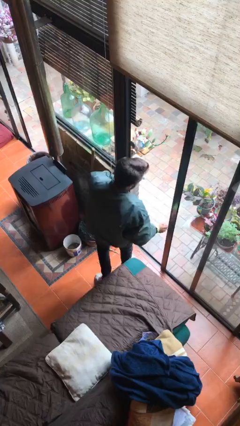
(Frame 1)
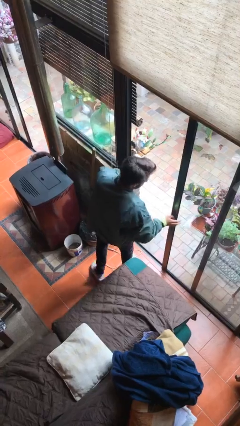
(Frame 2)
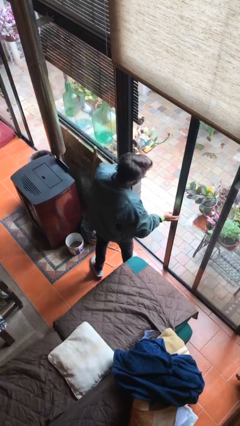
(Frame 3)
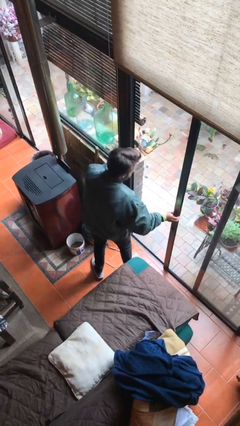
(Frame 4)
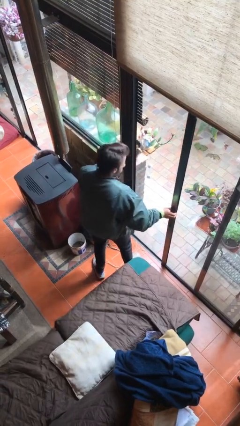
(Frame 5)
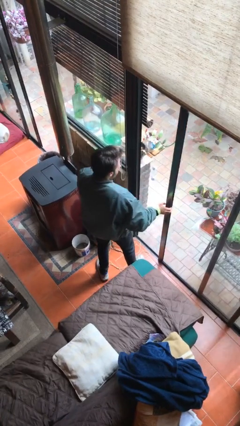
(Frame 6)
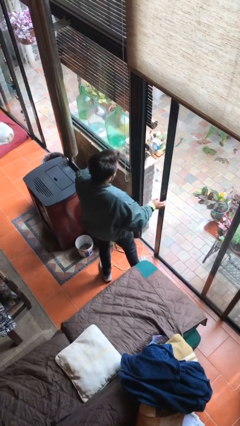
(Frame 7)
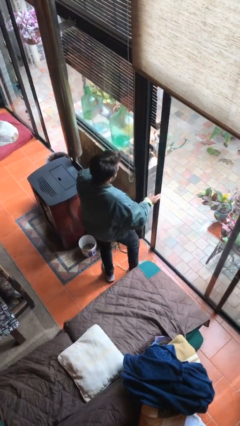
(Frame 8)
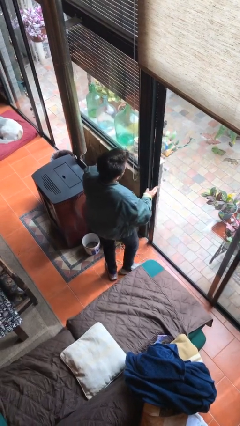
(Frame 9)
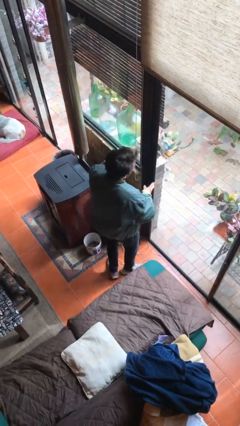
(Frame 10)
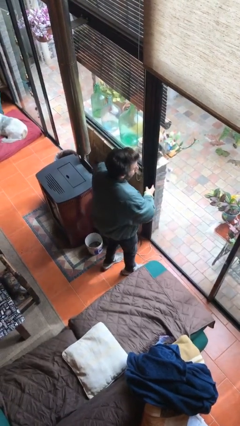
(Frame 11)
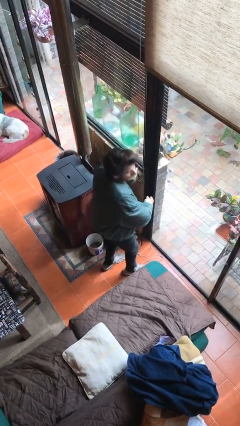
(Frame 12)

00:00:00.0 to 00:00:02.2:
person closes facility door

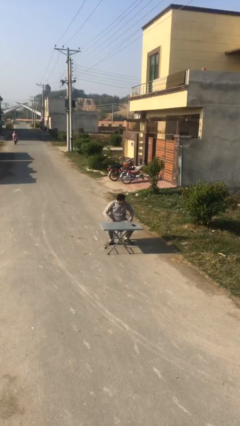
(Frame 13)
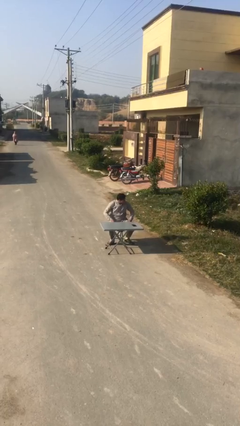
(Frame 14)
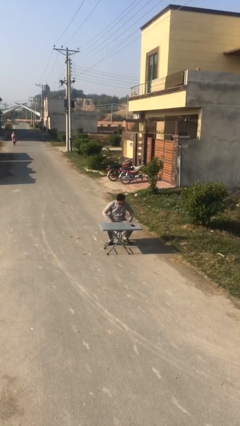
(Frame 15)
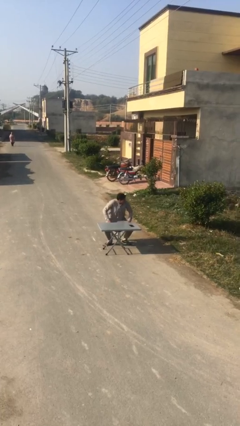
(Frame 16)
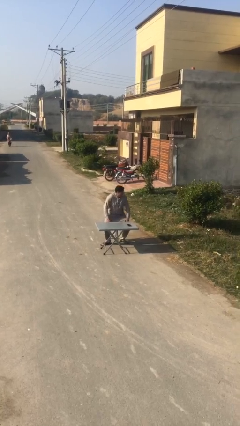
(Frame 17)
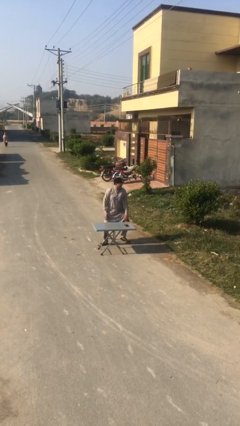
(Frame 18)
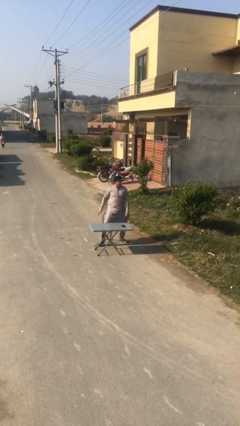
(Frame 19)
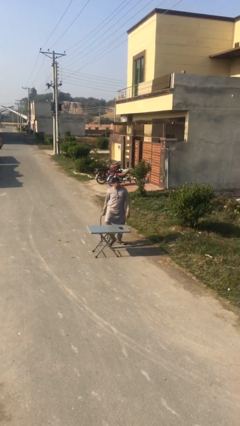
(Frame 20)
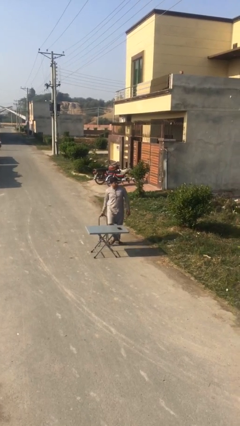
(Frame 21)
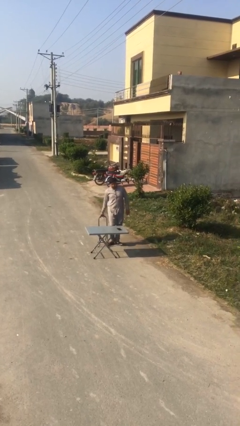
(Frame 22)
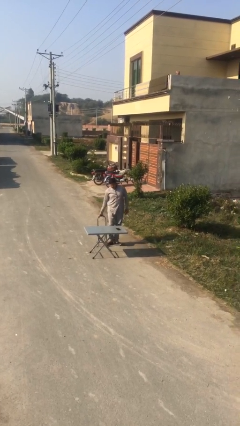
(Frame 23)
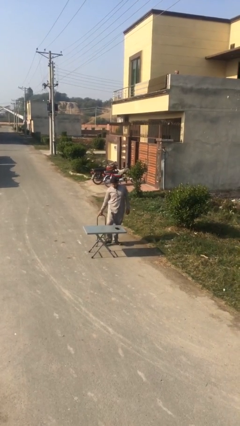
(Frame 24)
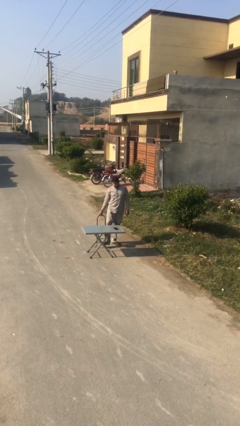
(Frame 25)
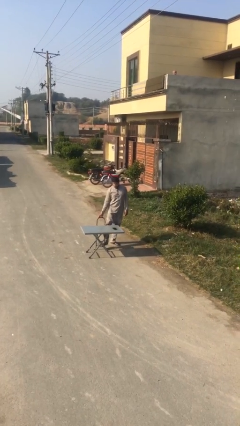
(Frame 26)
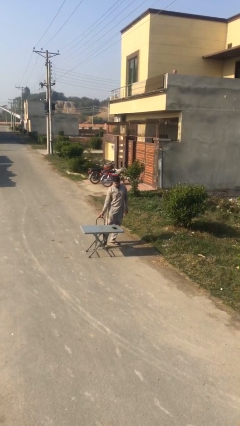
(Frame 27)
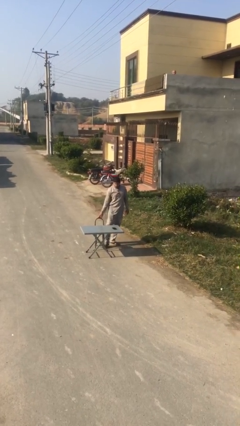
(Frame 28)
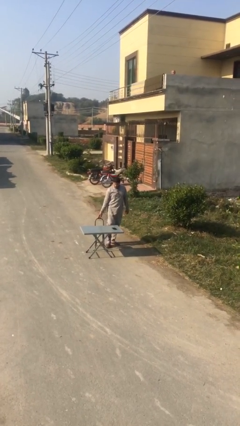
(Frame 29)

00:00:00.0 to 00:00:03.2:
person stands up

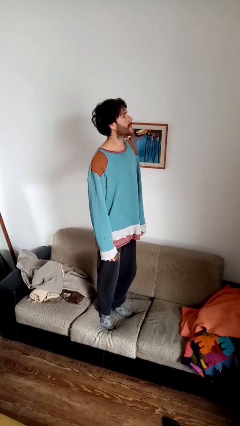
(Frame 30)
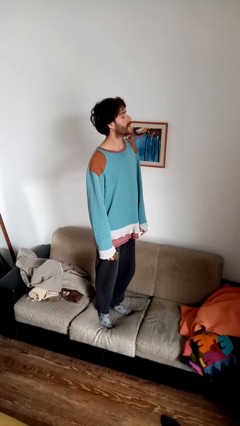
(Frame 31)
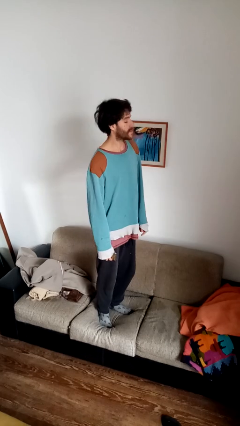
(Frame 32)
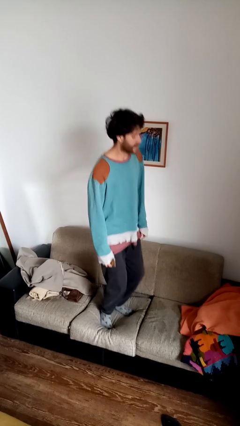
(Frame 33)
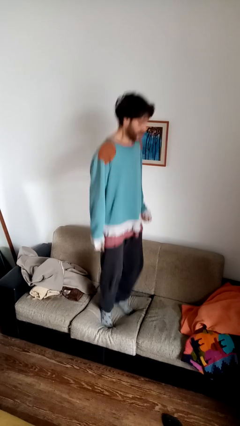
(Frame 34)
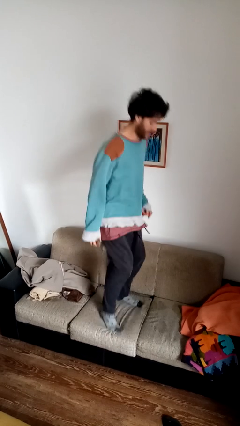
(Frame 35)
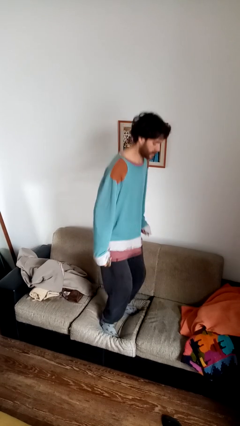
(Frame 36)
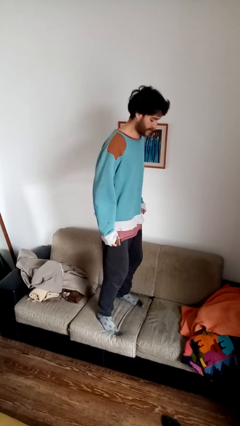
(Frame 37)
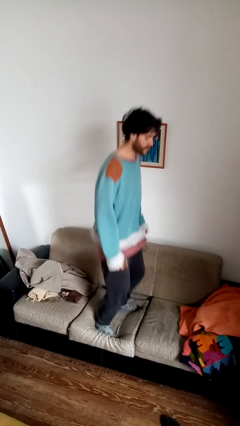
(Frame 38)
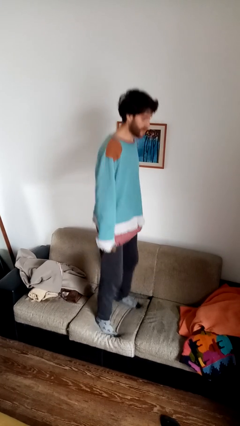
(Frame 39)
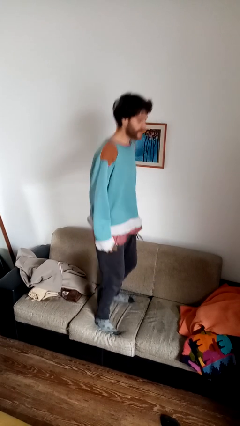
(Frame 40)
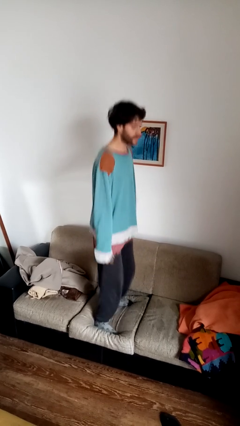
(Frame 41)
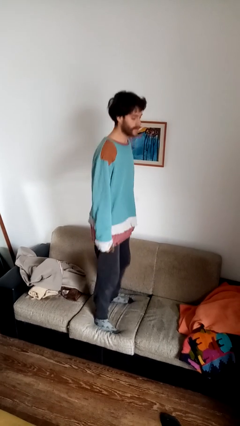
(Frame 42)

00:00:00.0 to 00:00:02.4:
person jumps on couch

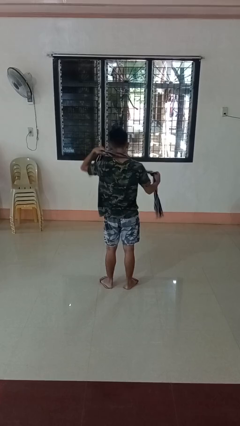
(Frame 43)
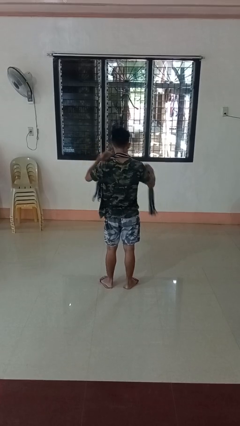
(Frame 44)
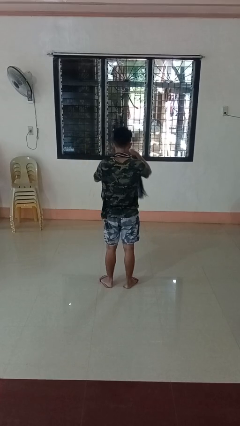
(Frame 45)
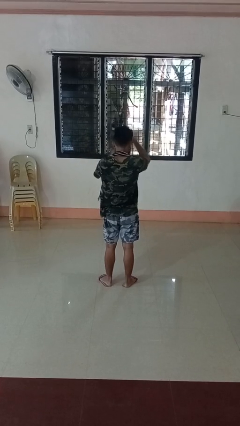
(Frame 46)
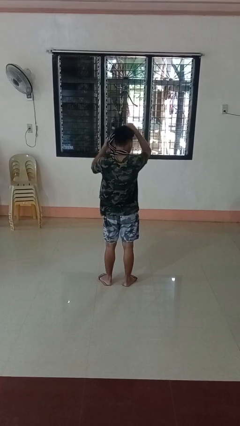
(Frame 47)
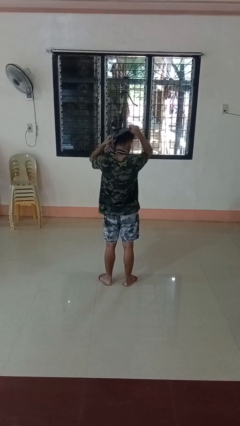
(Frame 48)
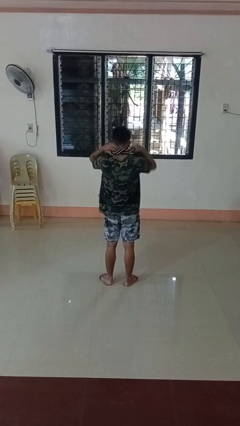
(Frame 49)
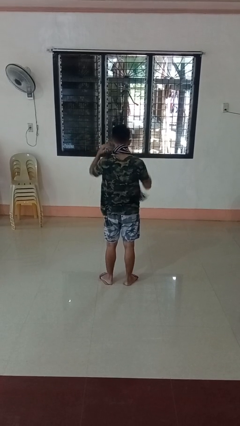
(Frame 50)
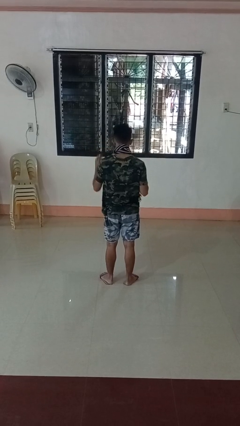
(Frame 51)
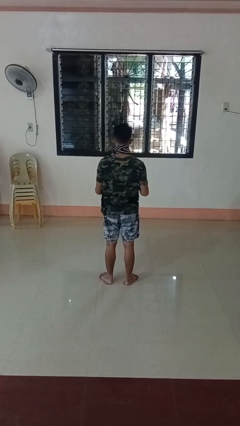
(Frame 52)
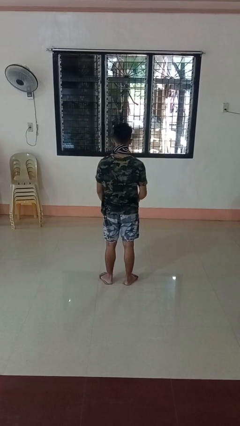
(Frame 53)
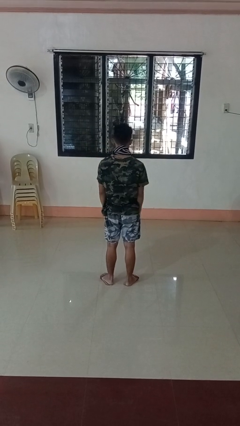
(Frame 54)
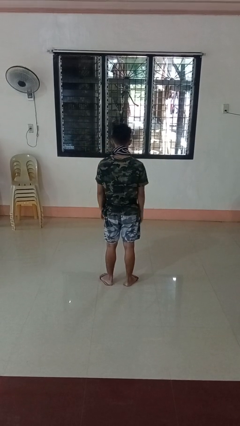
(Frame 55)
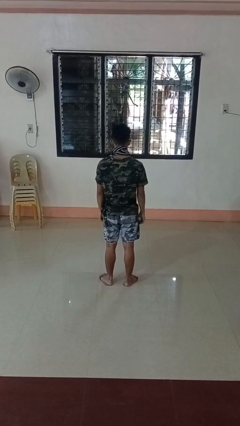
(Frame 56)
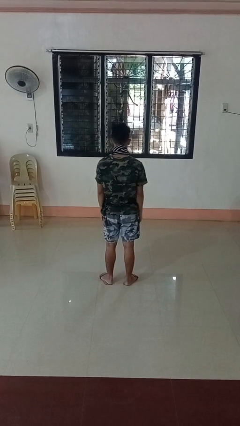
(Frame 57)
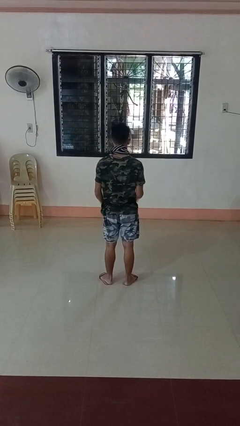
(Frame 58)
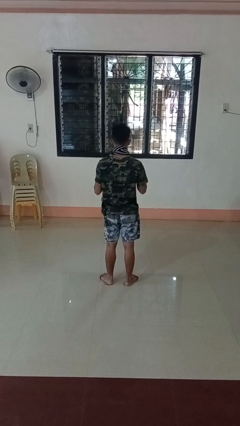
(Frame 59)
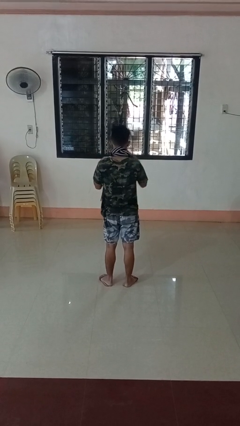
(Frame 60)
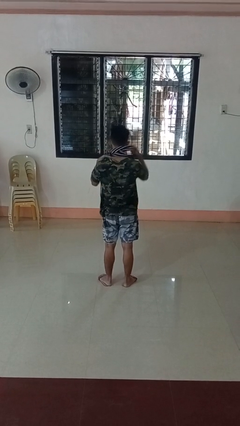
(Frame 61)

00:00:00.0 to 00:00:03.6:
person puts on scarf

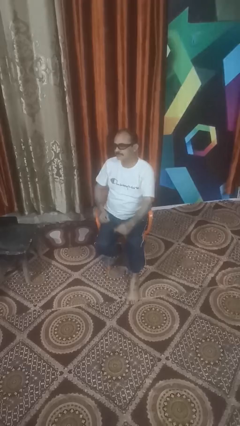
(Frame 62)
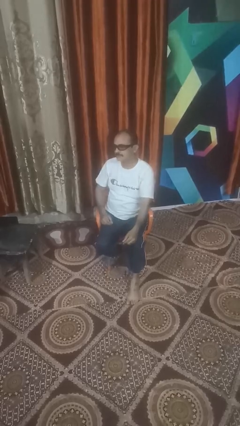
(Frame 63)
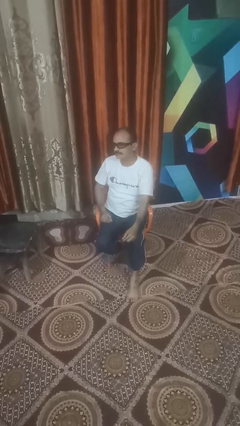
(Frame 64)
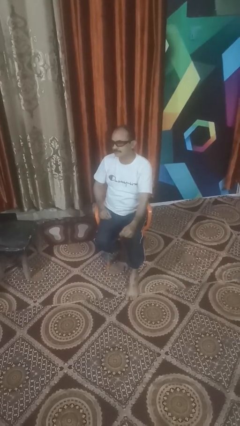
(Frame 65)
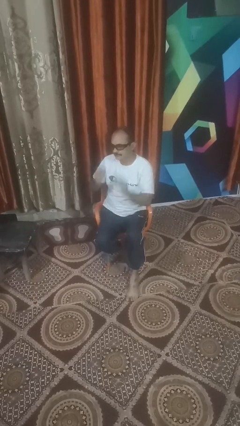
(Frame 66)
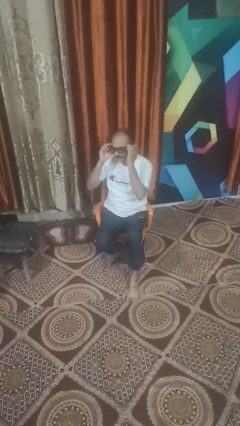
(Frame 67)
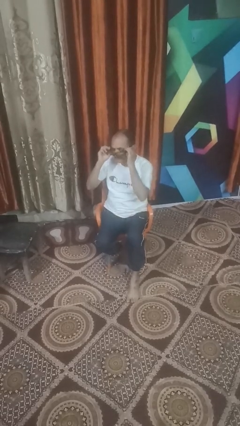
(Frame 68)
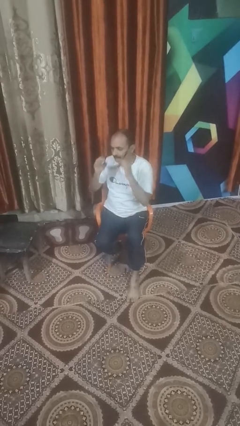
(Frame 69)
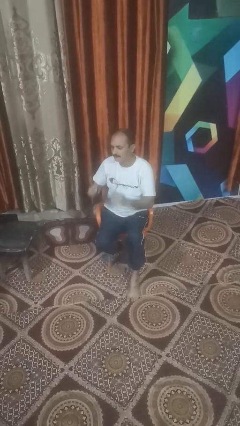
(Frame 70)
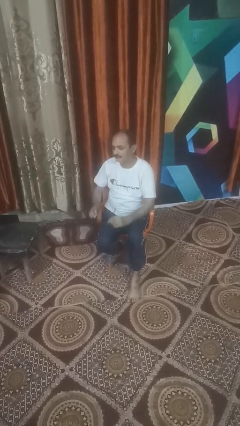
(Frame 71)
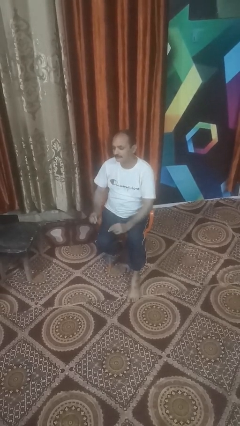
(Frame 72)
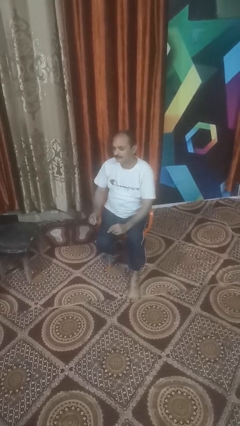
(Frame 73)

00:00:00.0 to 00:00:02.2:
person takes off sunglasses

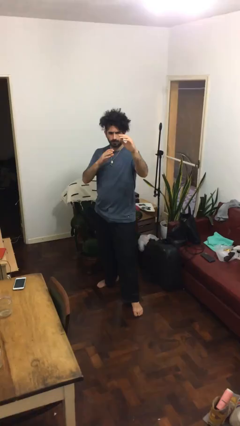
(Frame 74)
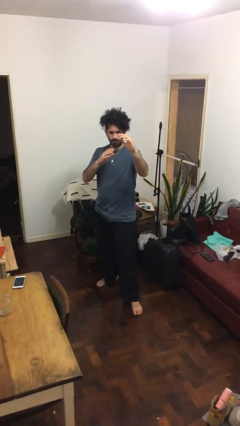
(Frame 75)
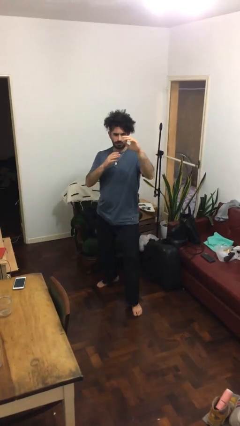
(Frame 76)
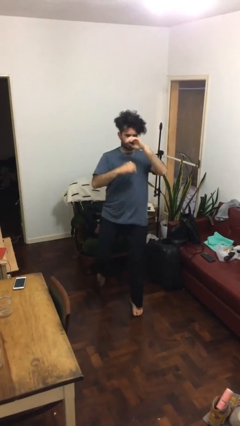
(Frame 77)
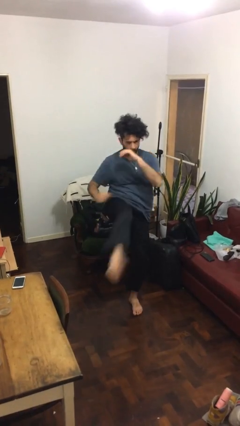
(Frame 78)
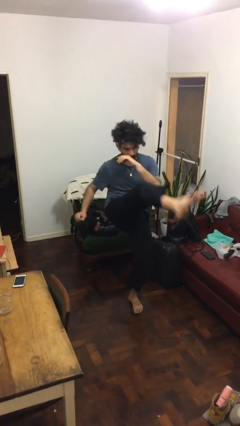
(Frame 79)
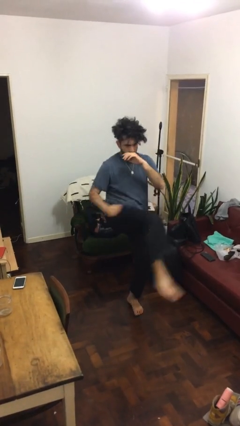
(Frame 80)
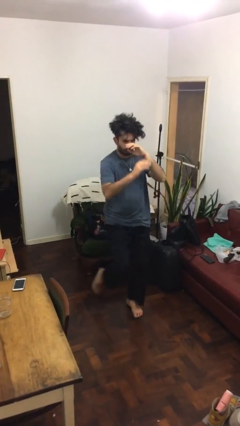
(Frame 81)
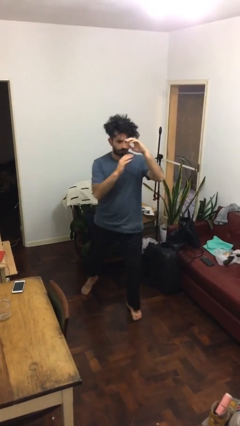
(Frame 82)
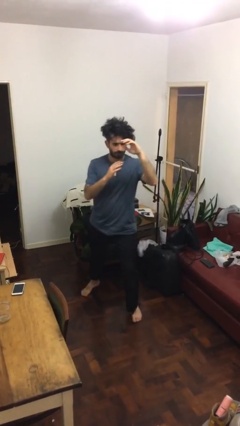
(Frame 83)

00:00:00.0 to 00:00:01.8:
person karate kicks

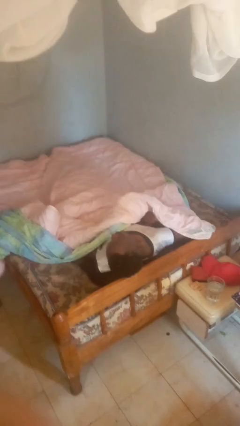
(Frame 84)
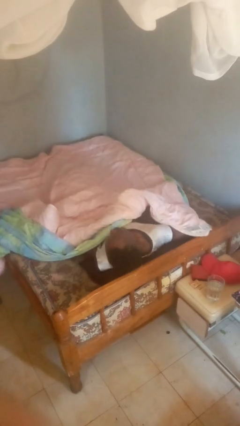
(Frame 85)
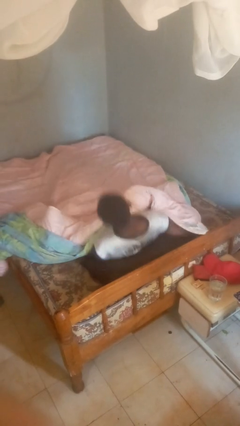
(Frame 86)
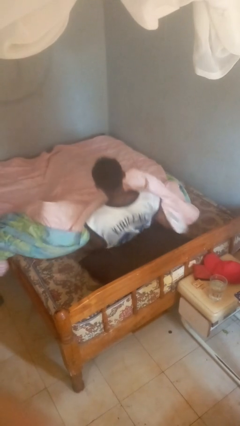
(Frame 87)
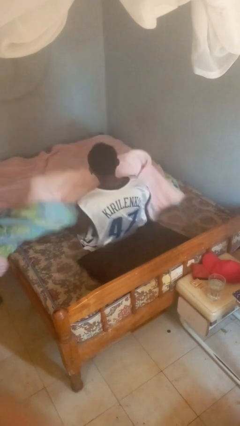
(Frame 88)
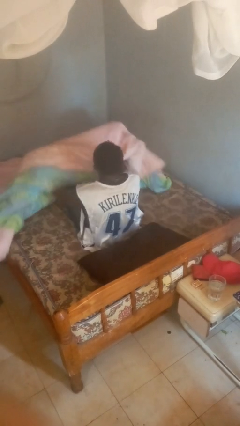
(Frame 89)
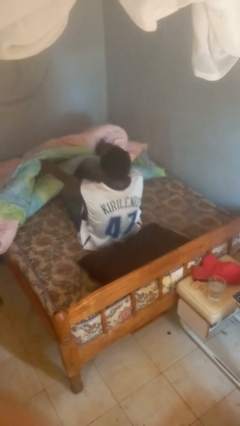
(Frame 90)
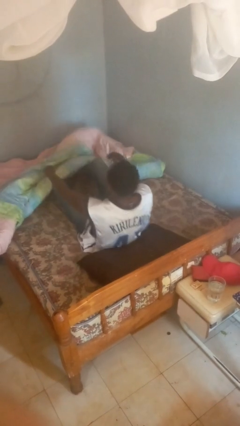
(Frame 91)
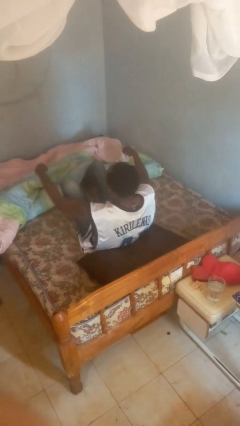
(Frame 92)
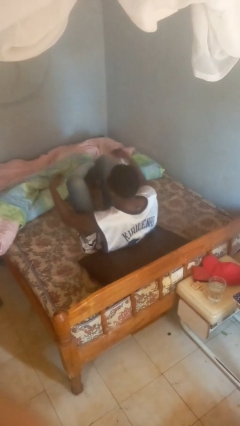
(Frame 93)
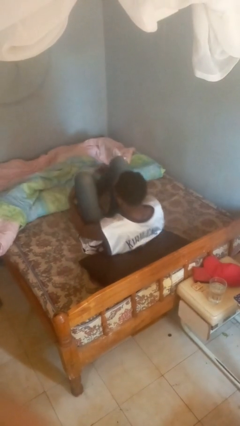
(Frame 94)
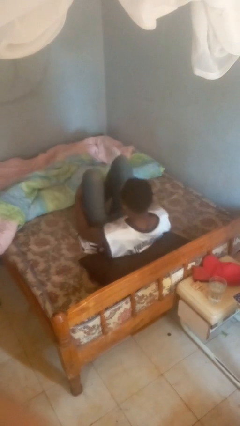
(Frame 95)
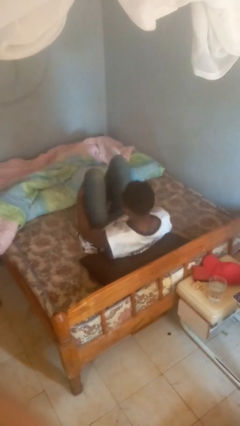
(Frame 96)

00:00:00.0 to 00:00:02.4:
person uncovers with bedsheets
